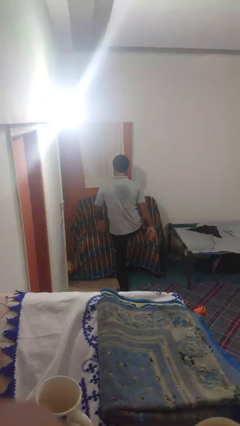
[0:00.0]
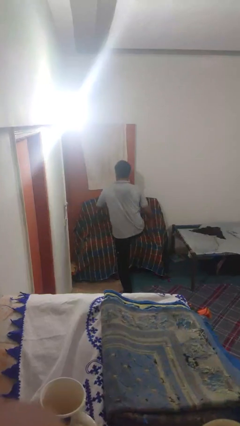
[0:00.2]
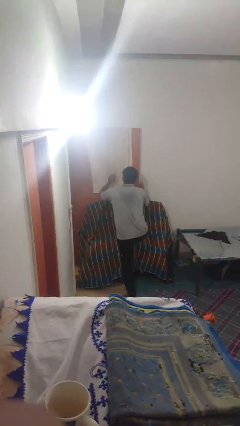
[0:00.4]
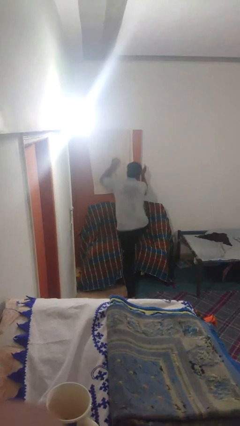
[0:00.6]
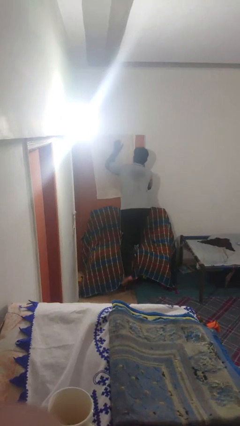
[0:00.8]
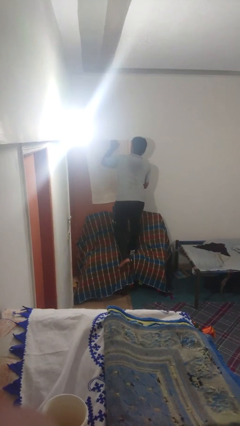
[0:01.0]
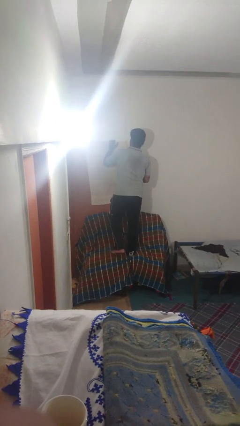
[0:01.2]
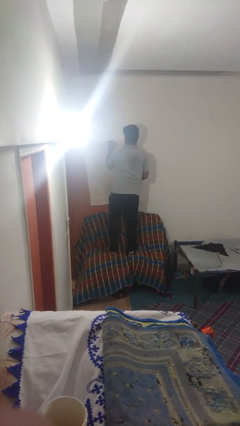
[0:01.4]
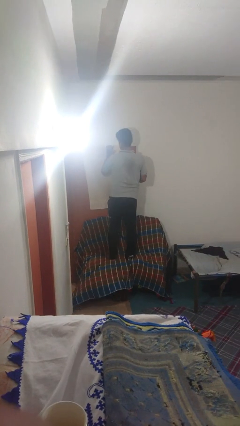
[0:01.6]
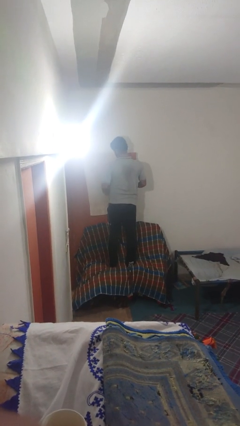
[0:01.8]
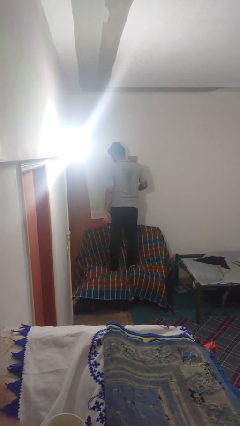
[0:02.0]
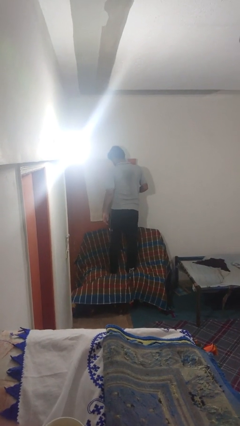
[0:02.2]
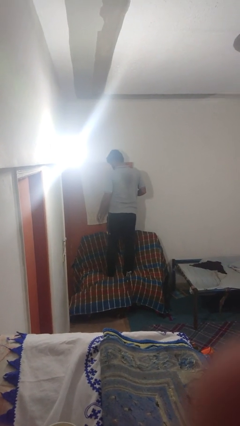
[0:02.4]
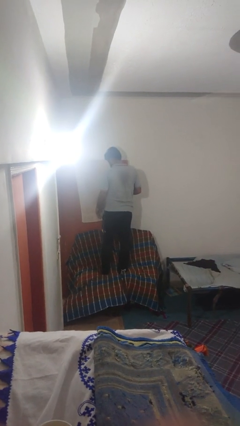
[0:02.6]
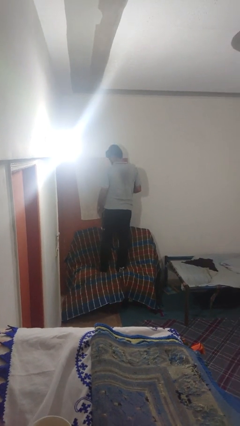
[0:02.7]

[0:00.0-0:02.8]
person climbs on couch

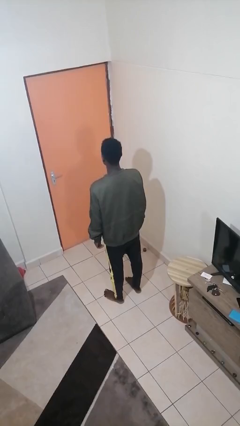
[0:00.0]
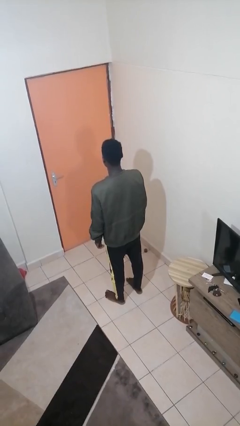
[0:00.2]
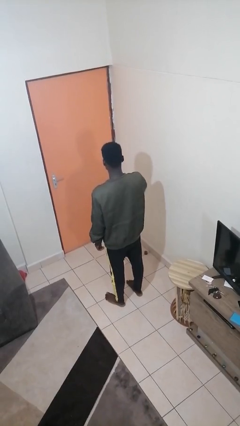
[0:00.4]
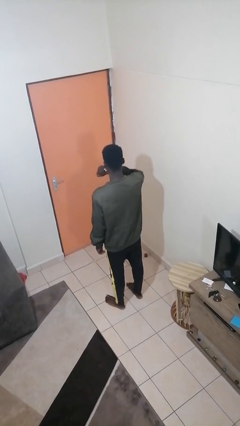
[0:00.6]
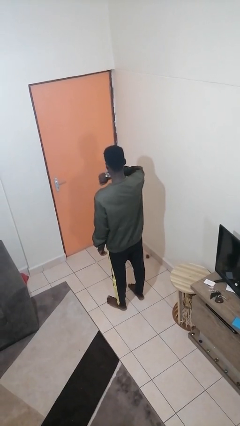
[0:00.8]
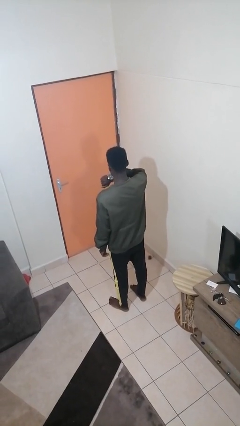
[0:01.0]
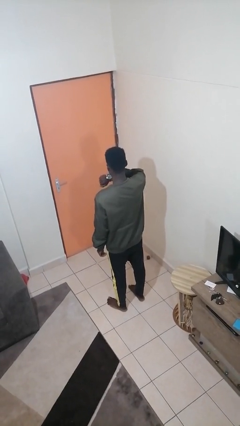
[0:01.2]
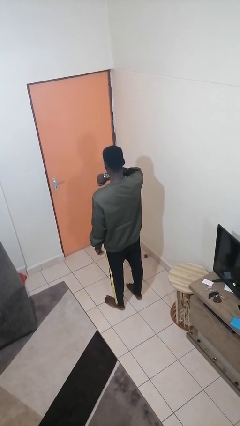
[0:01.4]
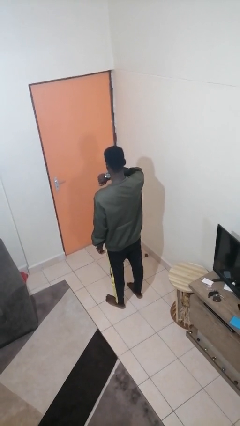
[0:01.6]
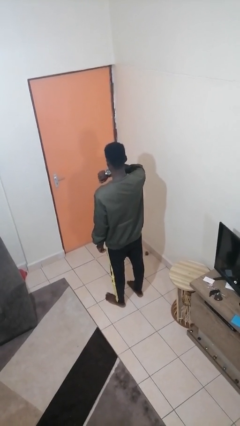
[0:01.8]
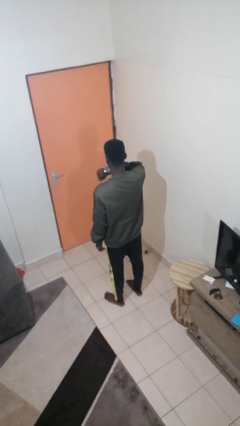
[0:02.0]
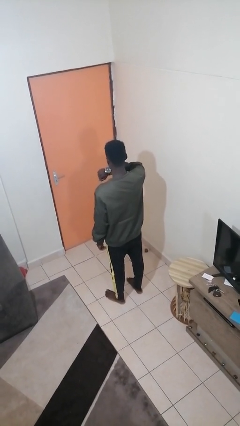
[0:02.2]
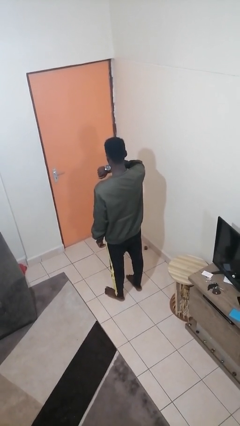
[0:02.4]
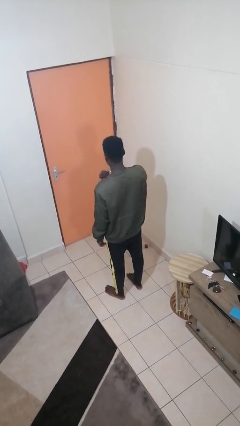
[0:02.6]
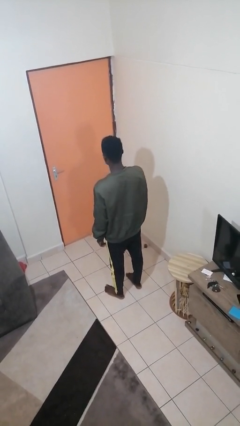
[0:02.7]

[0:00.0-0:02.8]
person looks at wristwatch

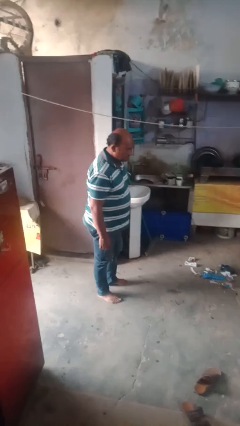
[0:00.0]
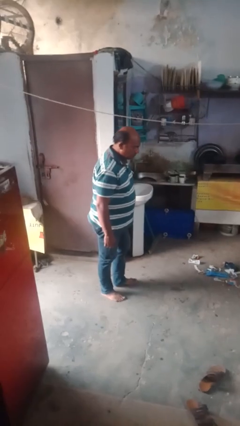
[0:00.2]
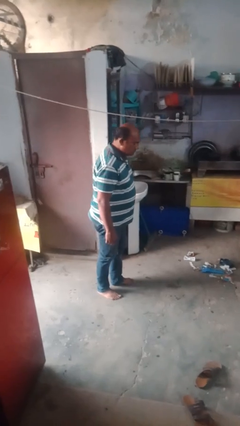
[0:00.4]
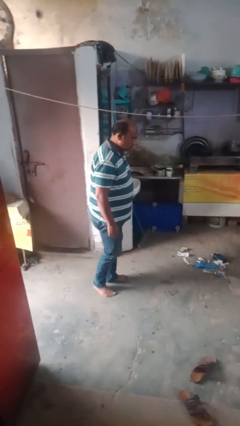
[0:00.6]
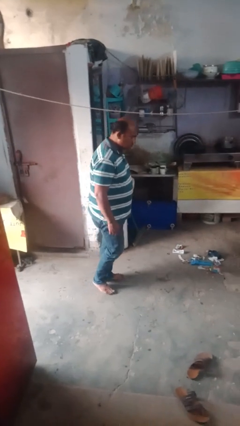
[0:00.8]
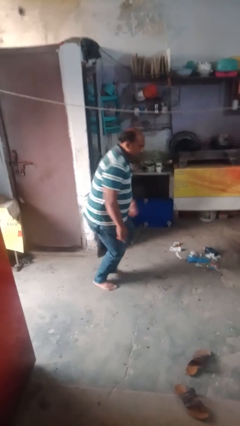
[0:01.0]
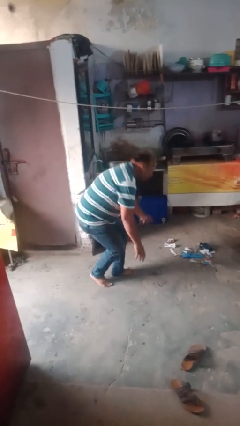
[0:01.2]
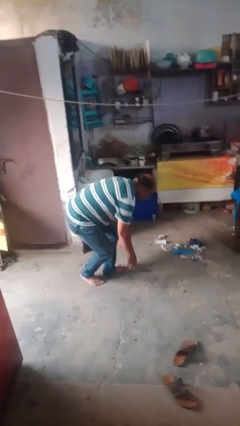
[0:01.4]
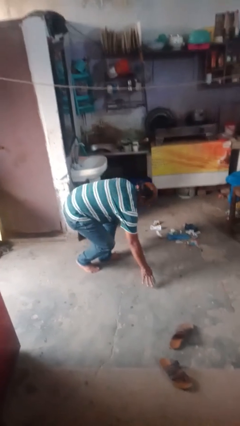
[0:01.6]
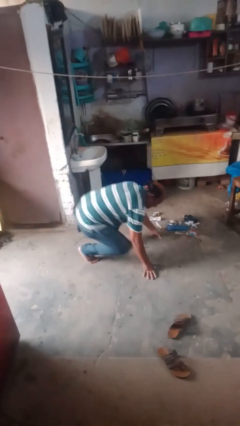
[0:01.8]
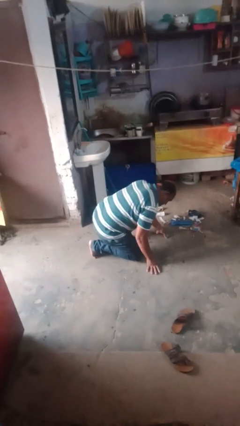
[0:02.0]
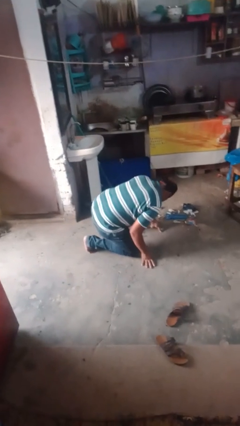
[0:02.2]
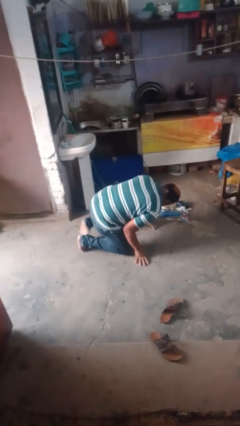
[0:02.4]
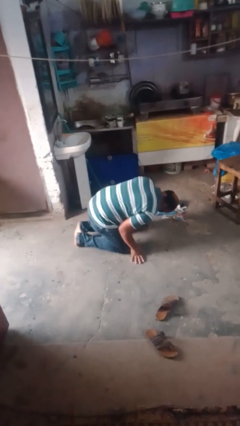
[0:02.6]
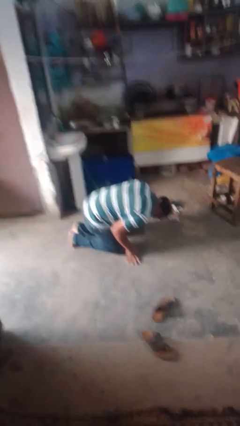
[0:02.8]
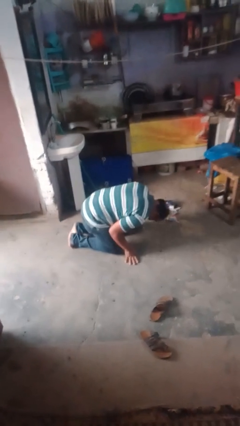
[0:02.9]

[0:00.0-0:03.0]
person trips on object on floor

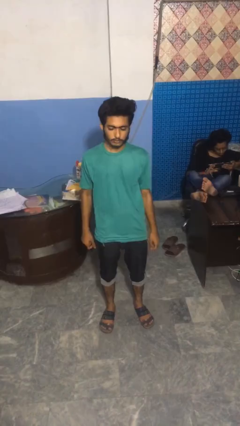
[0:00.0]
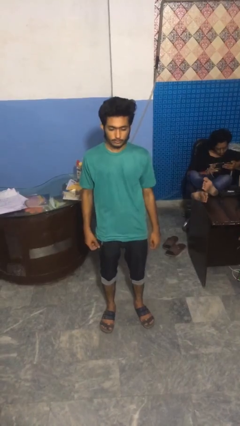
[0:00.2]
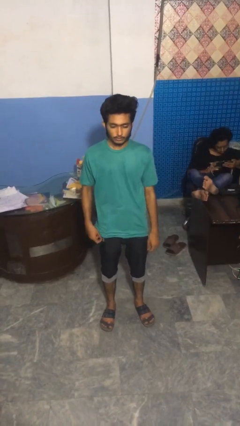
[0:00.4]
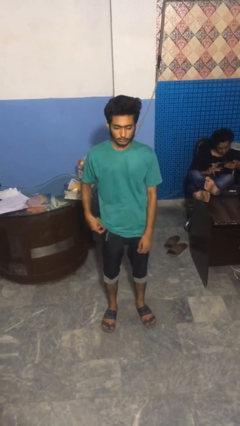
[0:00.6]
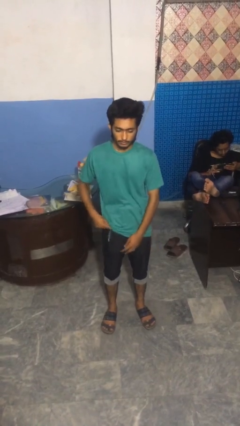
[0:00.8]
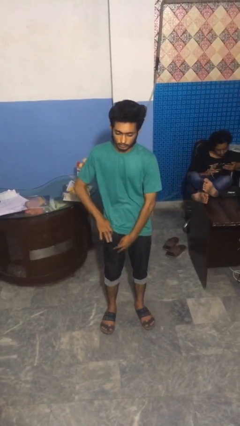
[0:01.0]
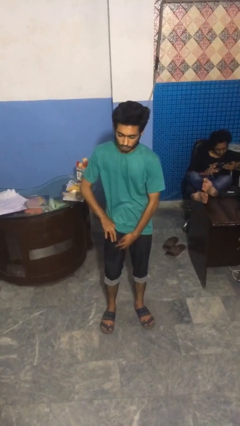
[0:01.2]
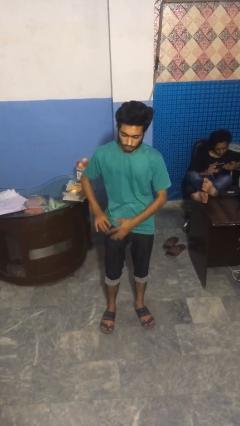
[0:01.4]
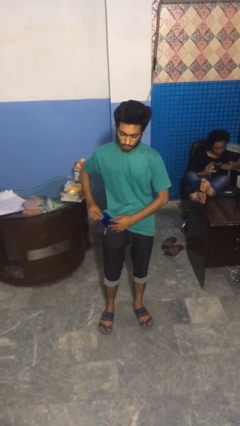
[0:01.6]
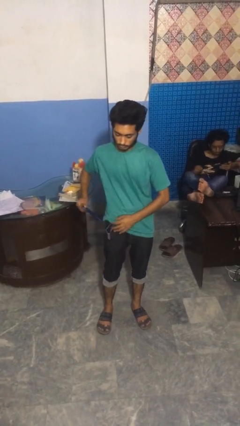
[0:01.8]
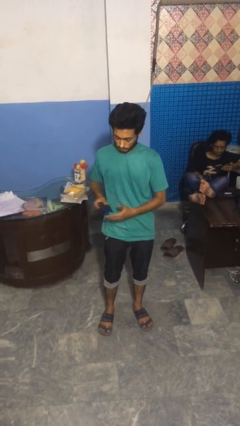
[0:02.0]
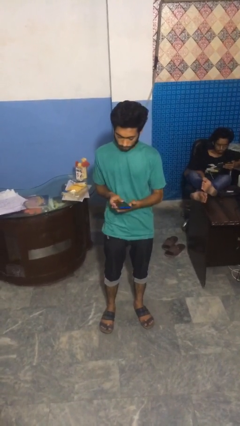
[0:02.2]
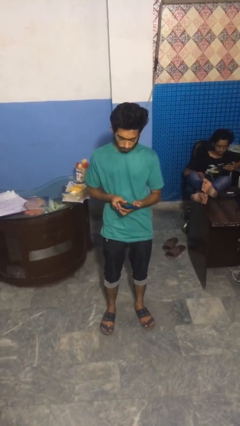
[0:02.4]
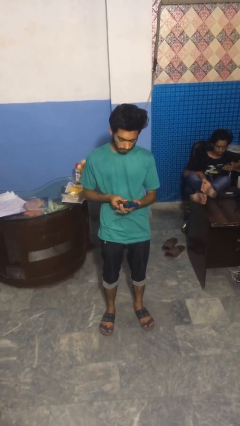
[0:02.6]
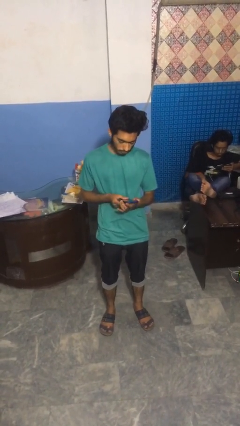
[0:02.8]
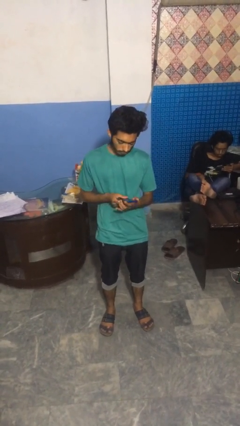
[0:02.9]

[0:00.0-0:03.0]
person takes phone from pocket

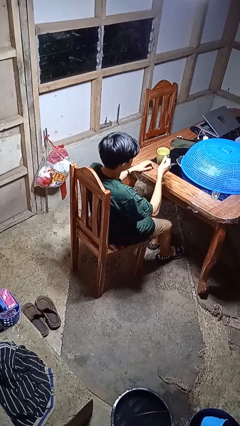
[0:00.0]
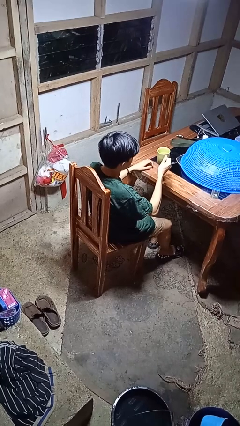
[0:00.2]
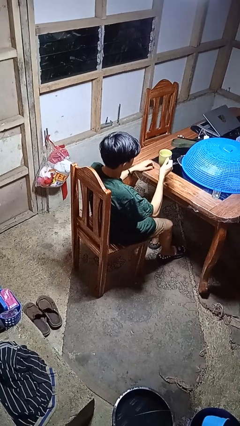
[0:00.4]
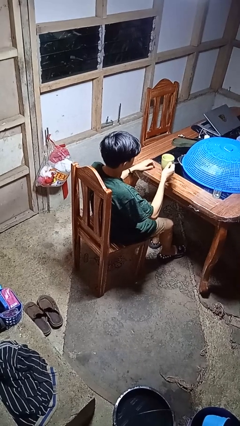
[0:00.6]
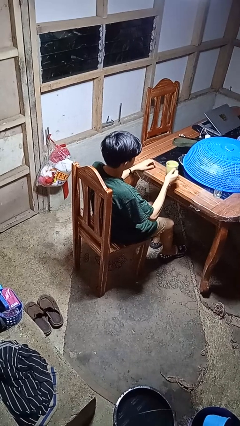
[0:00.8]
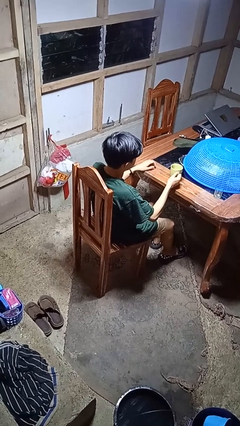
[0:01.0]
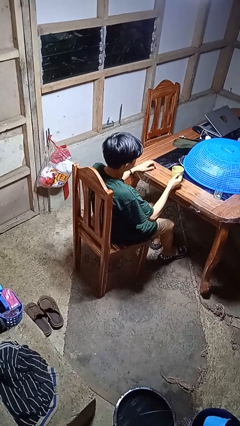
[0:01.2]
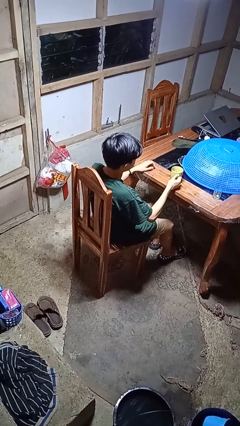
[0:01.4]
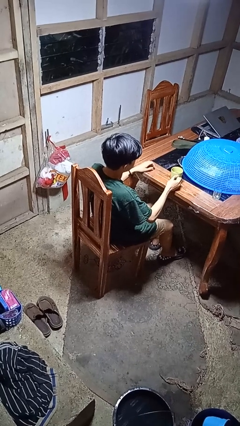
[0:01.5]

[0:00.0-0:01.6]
person puts down object on table

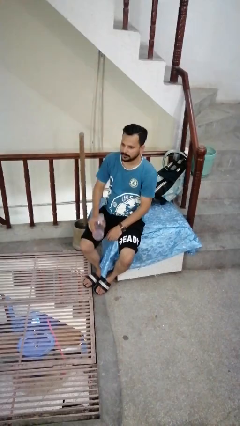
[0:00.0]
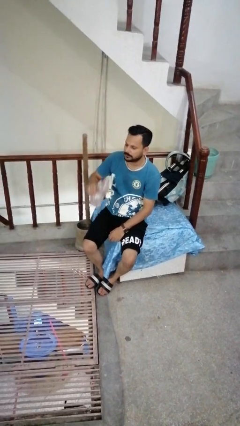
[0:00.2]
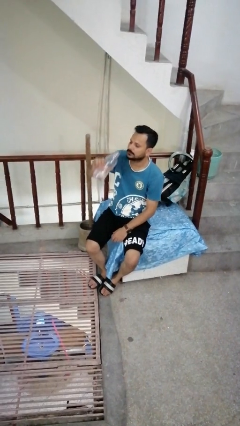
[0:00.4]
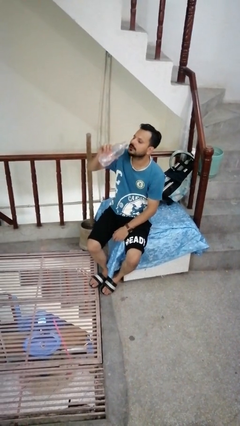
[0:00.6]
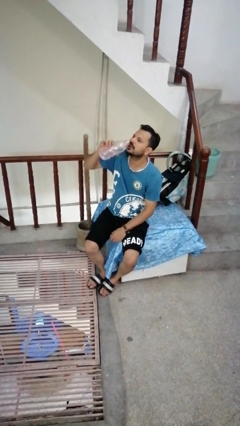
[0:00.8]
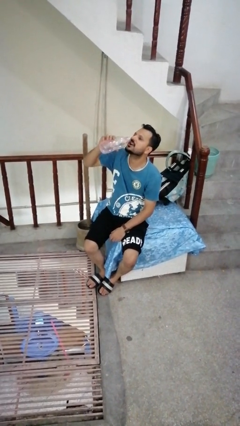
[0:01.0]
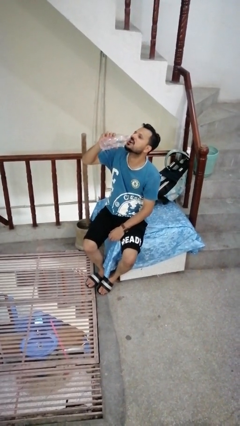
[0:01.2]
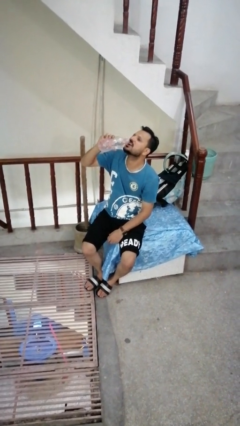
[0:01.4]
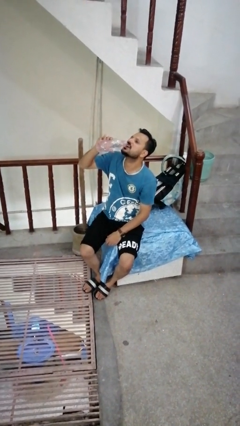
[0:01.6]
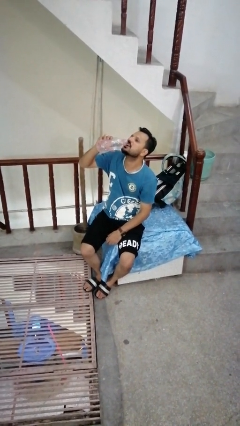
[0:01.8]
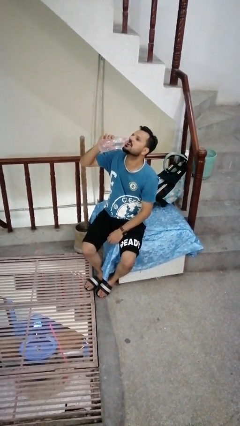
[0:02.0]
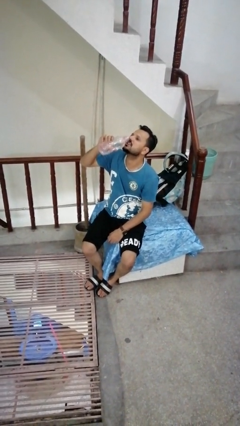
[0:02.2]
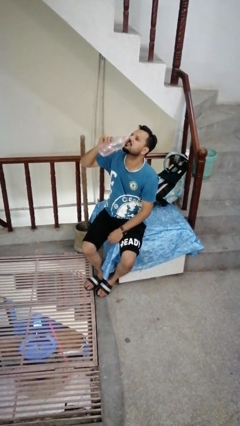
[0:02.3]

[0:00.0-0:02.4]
person drinks from bottle

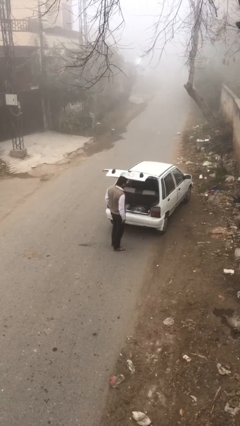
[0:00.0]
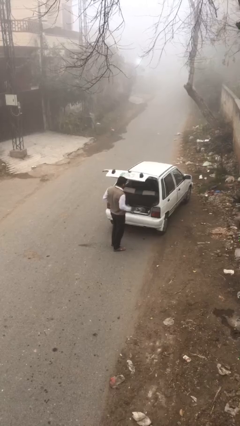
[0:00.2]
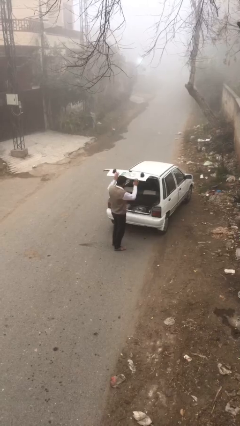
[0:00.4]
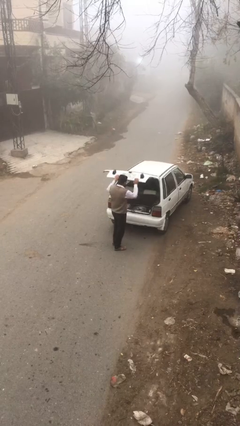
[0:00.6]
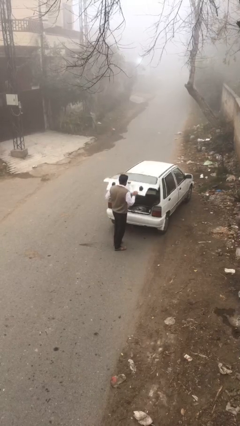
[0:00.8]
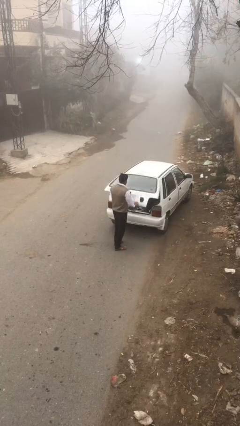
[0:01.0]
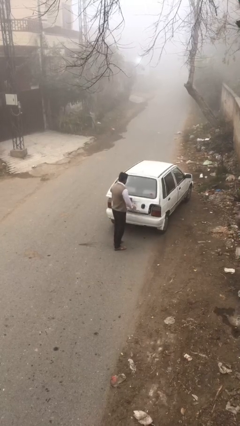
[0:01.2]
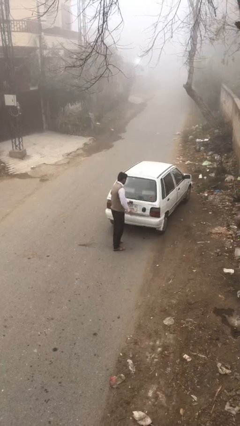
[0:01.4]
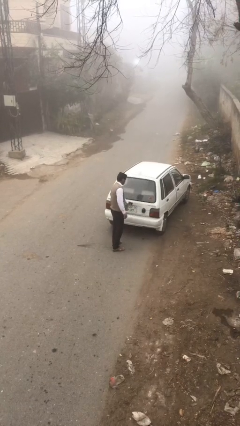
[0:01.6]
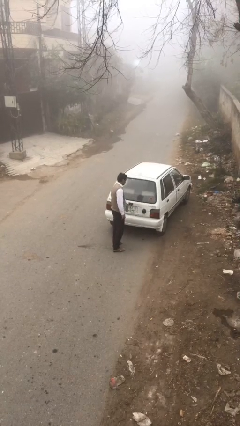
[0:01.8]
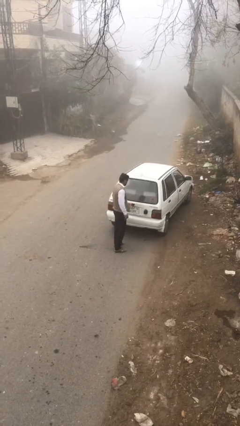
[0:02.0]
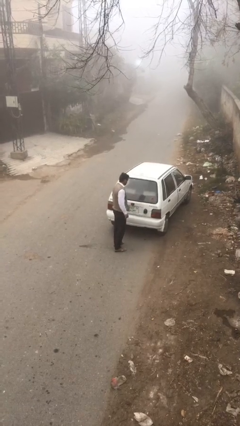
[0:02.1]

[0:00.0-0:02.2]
person closes car trunk
